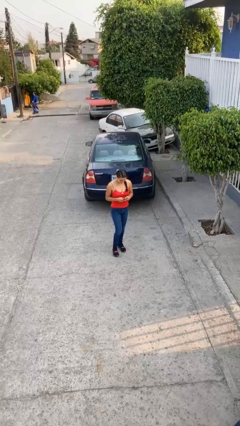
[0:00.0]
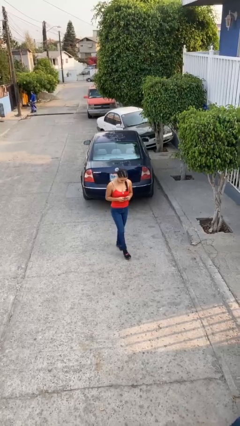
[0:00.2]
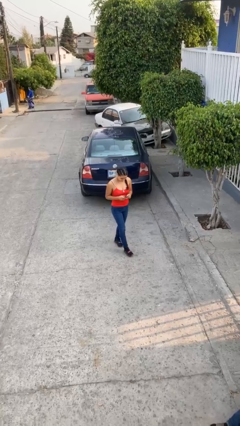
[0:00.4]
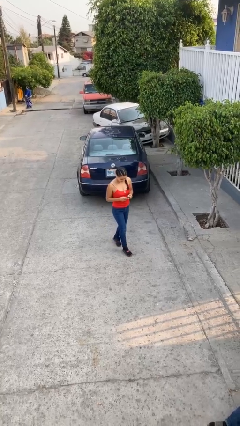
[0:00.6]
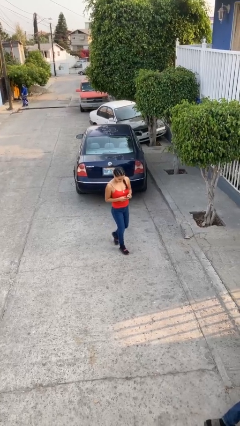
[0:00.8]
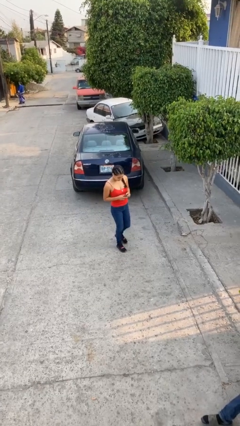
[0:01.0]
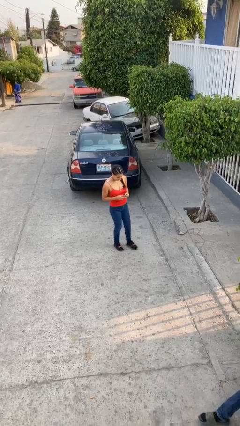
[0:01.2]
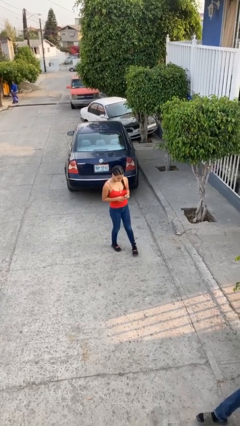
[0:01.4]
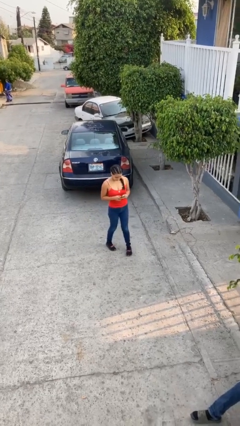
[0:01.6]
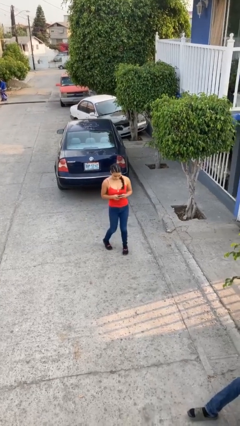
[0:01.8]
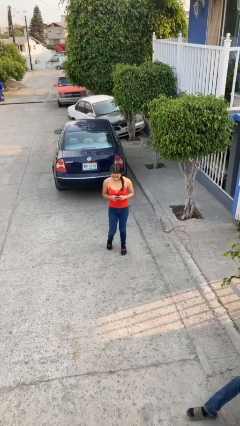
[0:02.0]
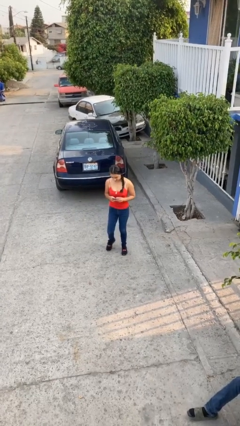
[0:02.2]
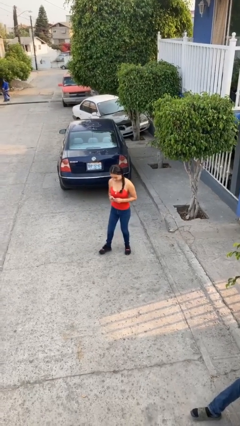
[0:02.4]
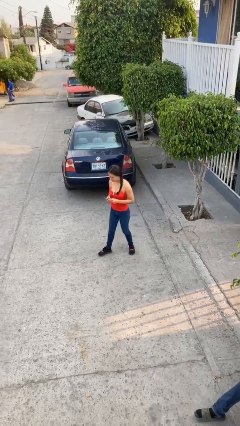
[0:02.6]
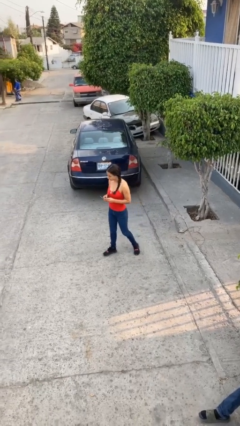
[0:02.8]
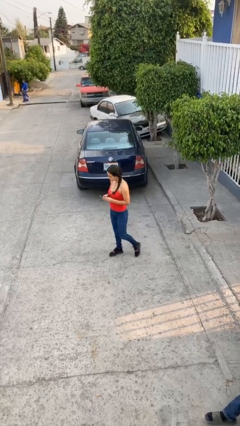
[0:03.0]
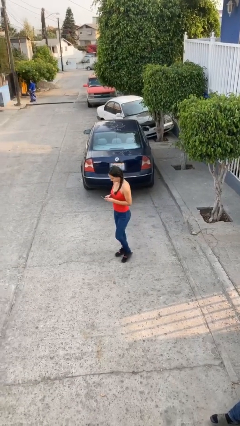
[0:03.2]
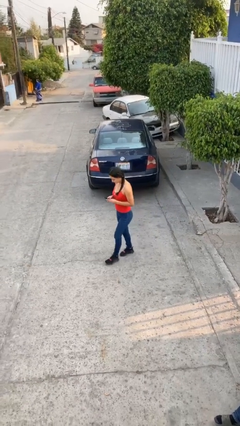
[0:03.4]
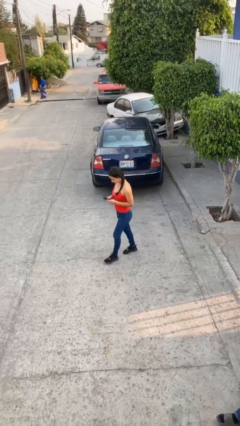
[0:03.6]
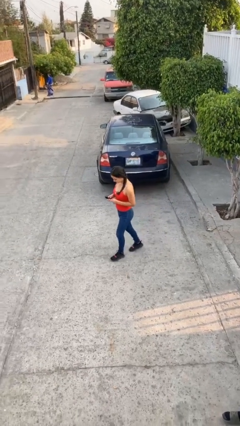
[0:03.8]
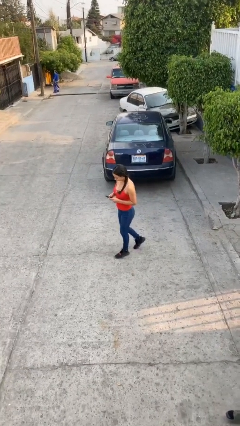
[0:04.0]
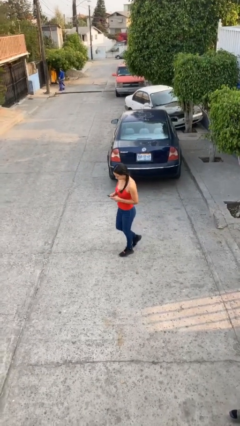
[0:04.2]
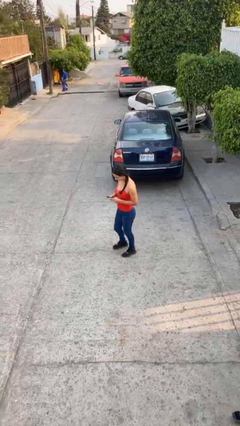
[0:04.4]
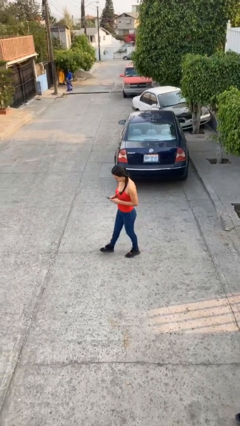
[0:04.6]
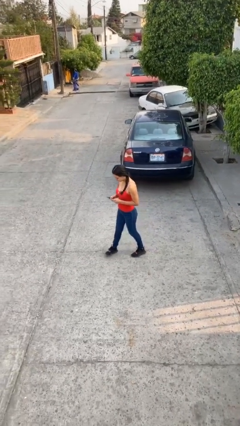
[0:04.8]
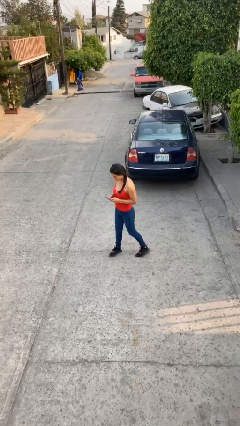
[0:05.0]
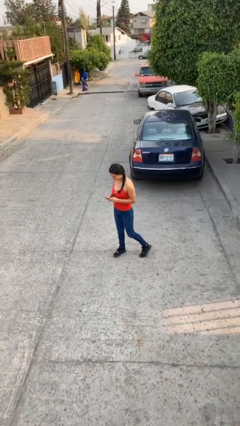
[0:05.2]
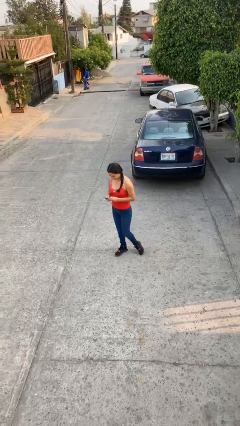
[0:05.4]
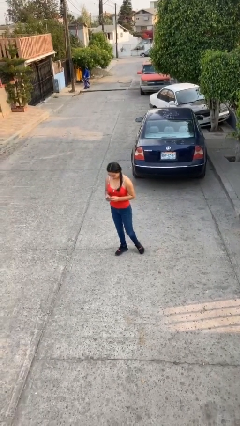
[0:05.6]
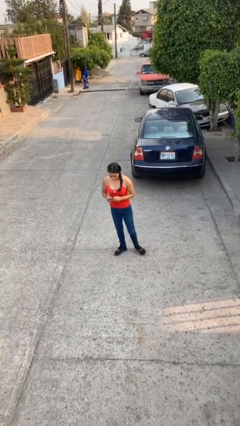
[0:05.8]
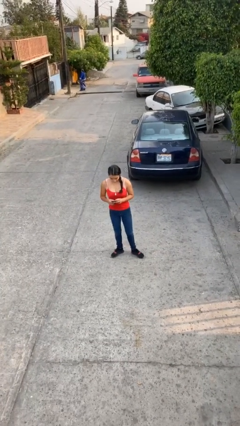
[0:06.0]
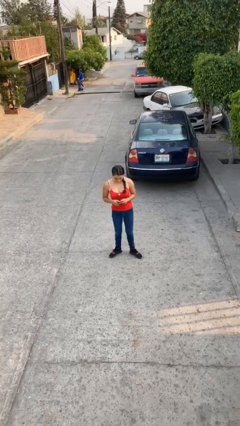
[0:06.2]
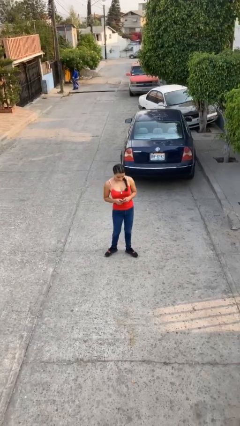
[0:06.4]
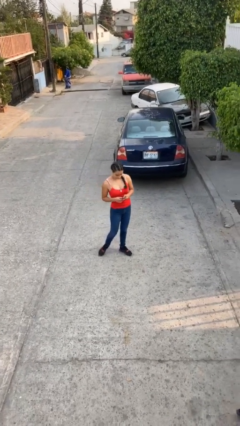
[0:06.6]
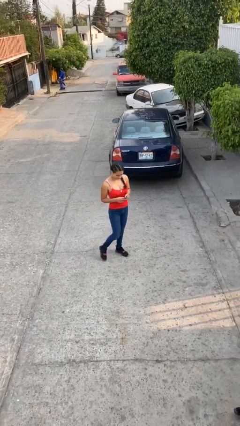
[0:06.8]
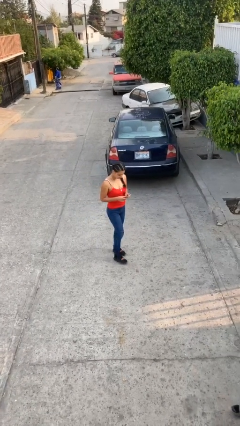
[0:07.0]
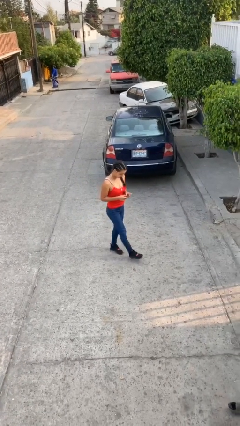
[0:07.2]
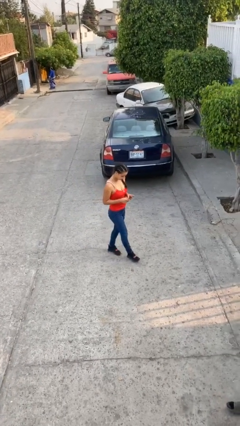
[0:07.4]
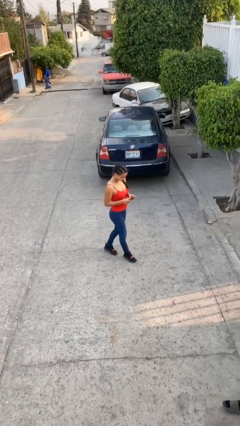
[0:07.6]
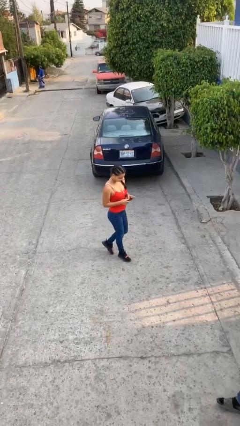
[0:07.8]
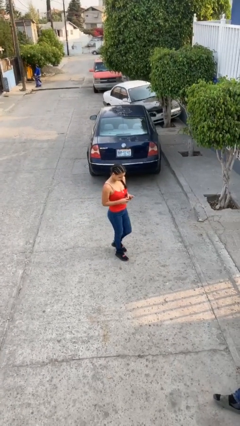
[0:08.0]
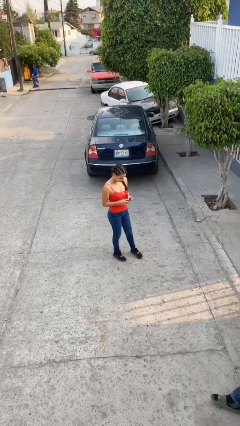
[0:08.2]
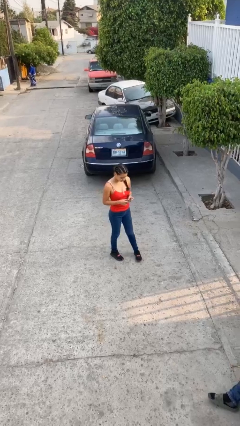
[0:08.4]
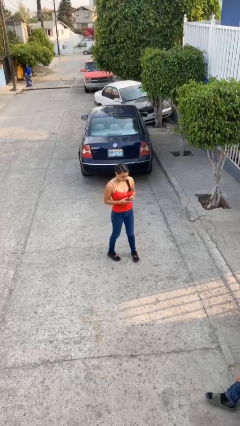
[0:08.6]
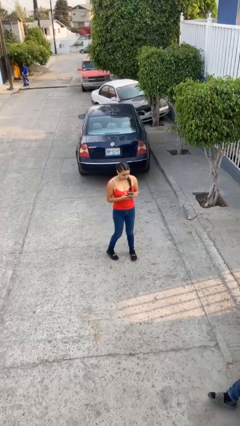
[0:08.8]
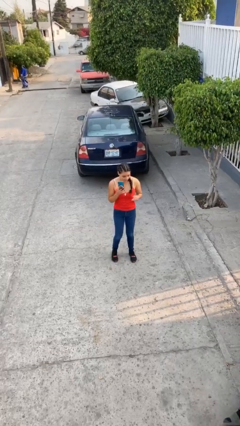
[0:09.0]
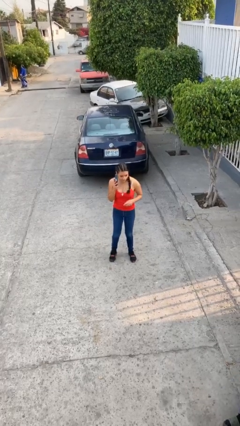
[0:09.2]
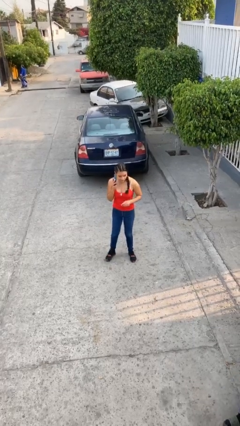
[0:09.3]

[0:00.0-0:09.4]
person texts on phone

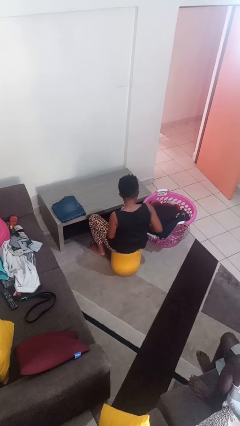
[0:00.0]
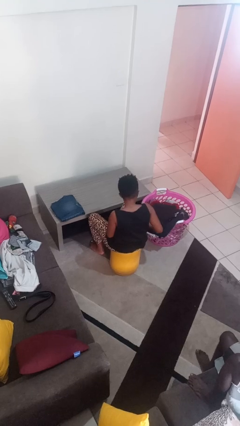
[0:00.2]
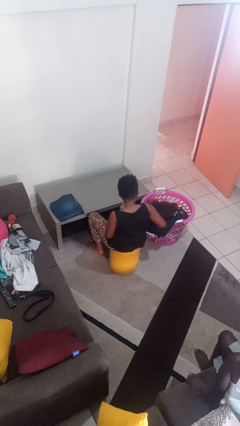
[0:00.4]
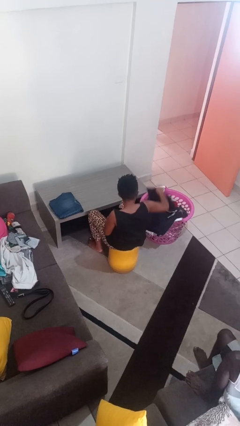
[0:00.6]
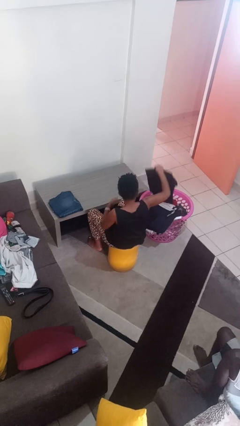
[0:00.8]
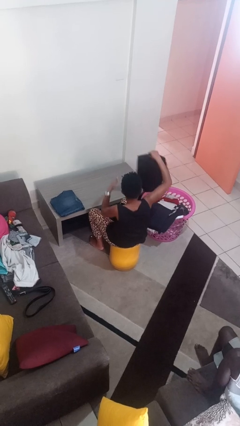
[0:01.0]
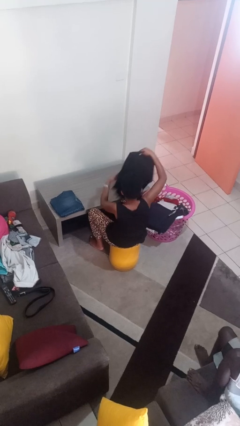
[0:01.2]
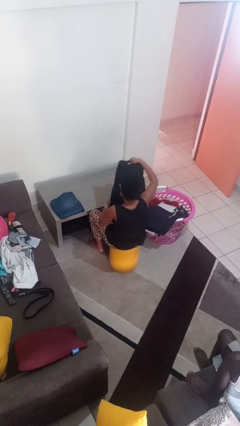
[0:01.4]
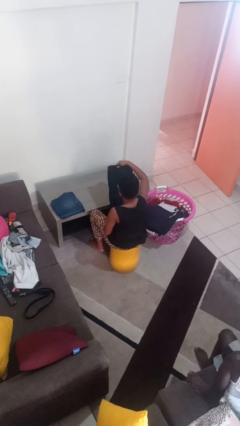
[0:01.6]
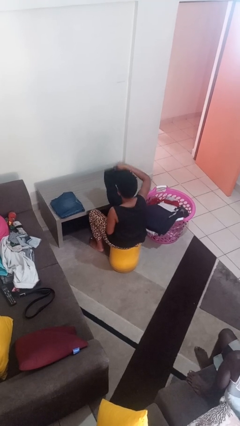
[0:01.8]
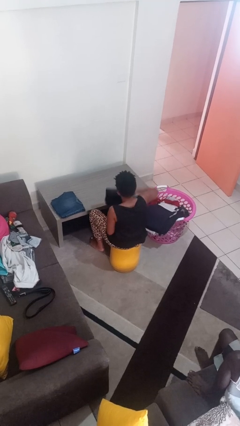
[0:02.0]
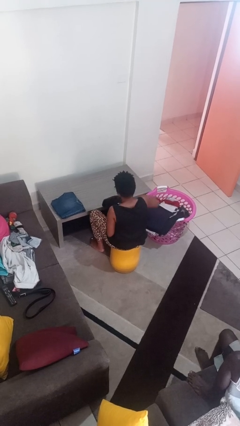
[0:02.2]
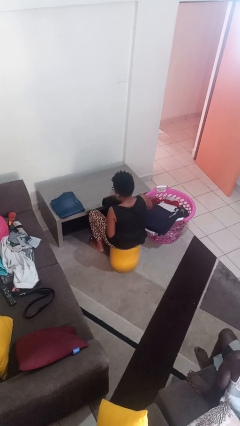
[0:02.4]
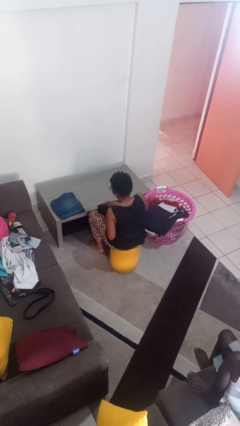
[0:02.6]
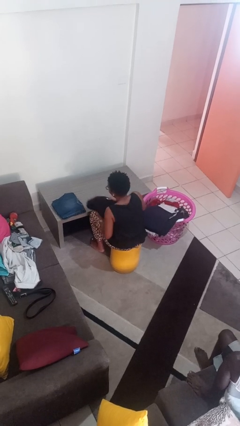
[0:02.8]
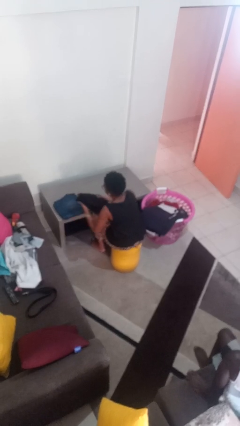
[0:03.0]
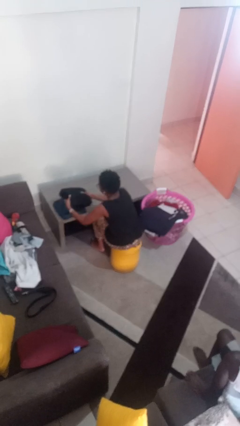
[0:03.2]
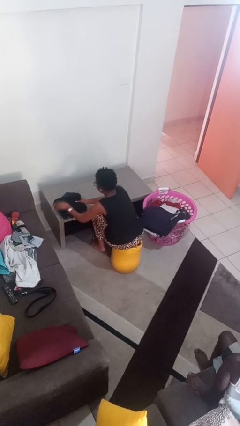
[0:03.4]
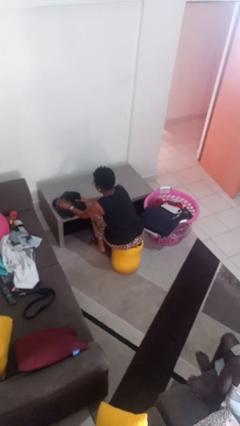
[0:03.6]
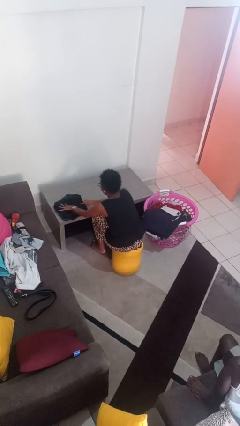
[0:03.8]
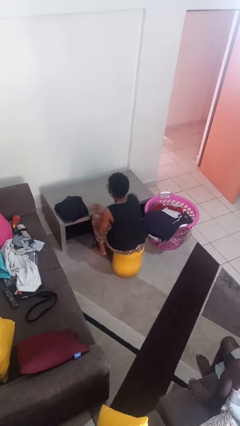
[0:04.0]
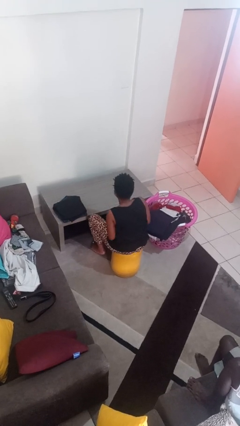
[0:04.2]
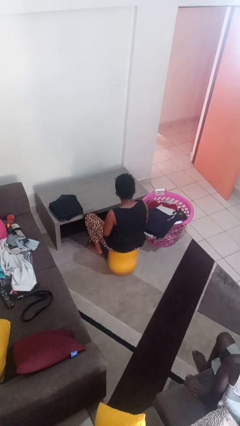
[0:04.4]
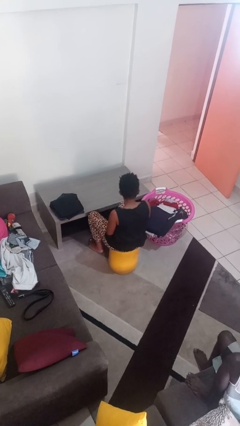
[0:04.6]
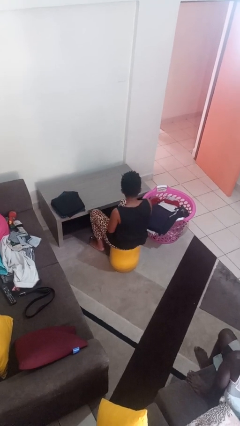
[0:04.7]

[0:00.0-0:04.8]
person folds pants

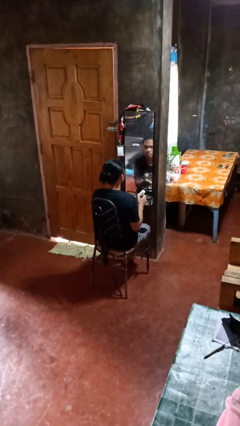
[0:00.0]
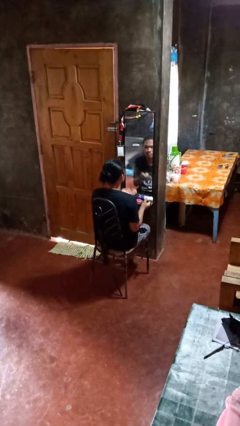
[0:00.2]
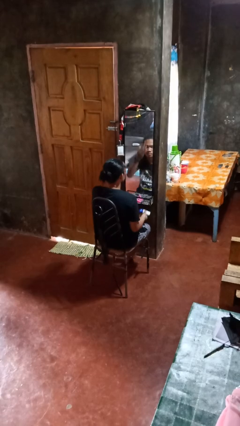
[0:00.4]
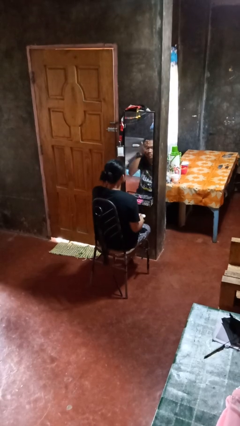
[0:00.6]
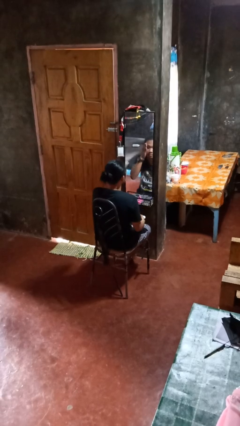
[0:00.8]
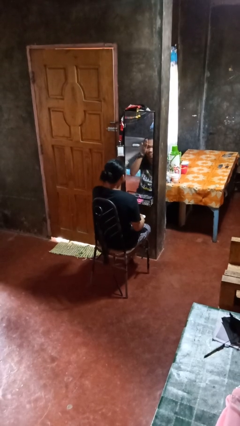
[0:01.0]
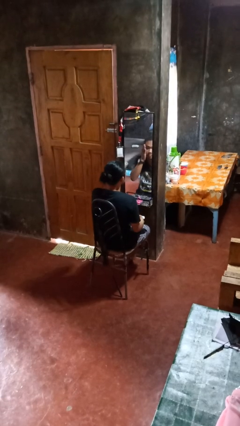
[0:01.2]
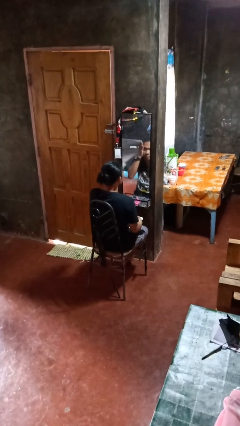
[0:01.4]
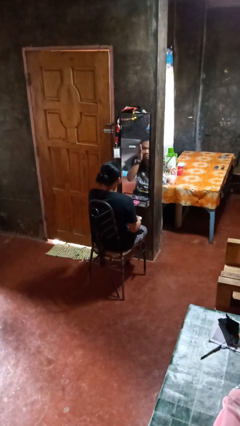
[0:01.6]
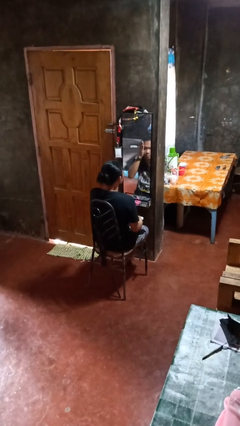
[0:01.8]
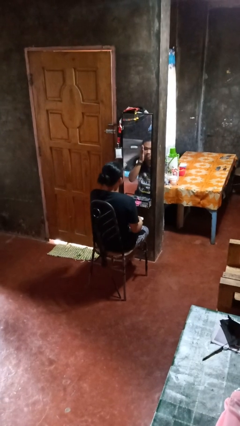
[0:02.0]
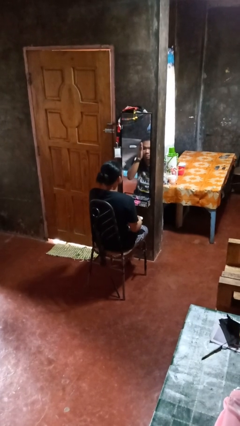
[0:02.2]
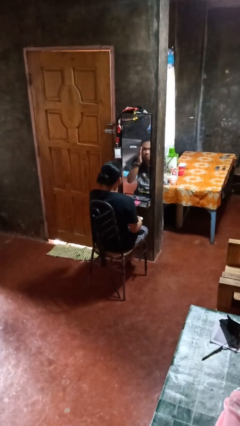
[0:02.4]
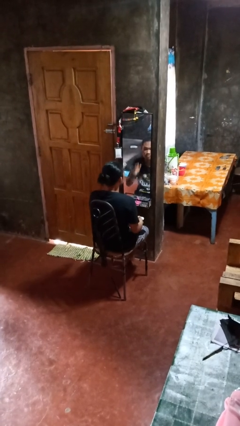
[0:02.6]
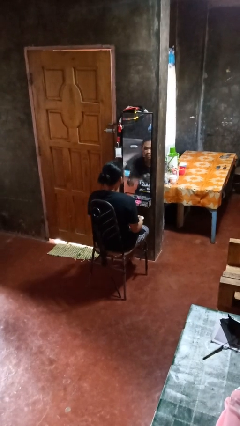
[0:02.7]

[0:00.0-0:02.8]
person applies foundation makeup

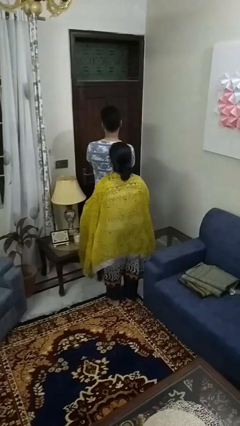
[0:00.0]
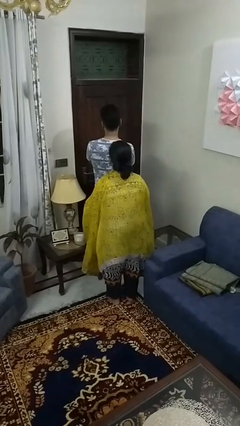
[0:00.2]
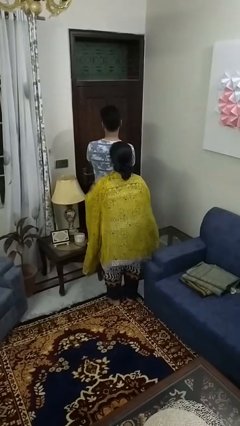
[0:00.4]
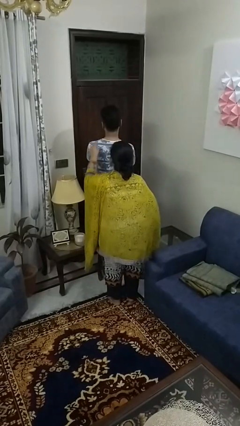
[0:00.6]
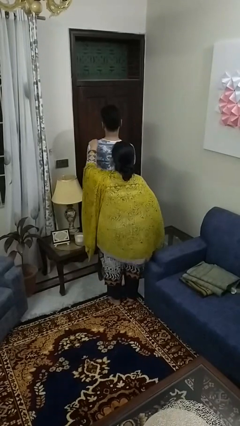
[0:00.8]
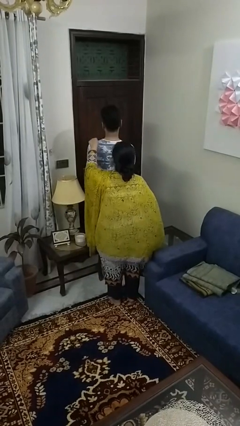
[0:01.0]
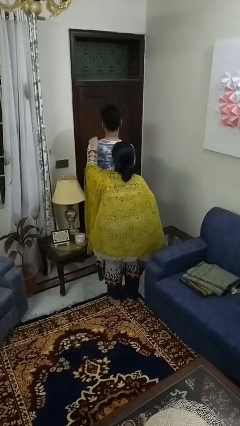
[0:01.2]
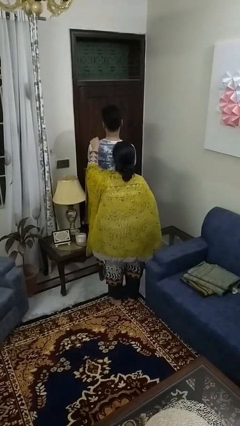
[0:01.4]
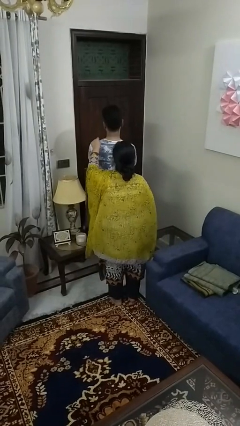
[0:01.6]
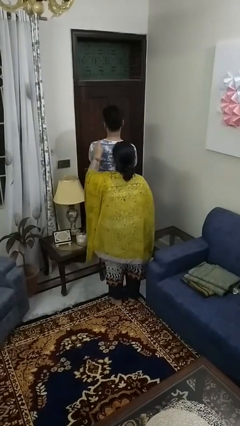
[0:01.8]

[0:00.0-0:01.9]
person touches back of person
